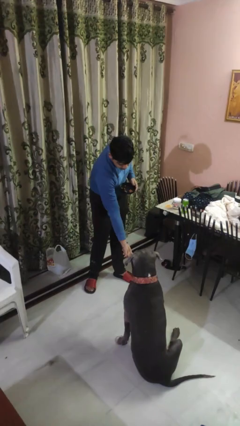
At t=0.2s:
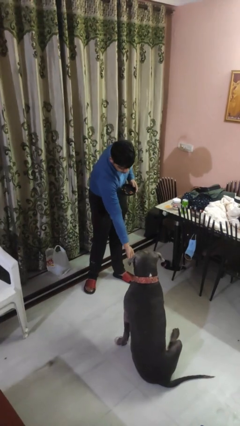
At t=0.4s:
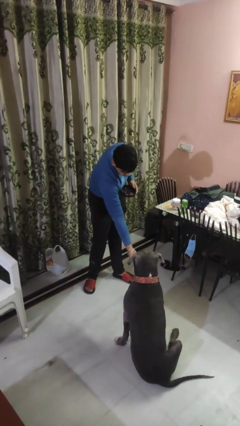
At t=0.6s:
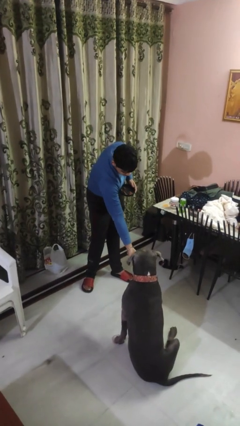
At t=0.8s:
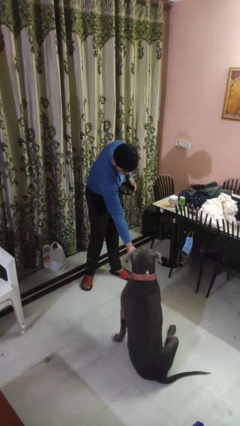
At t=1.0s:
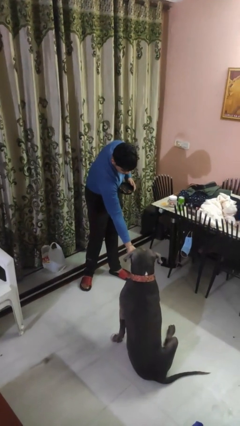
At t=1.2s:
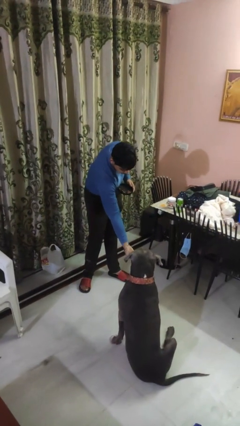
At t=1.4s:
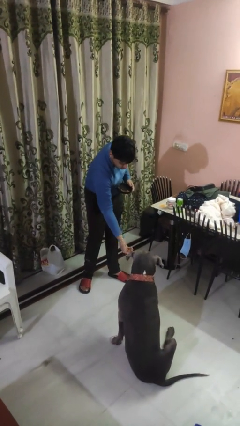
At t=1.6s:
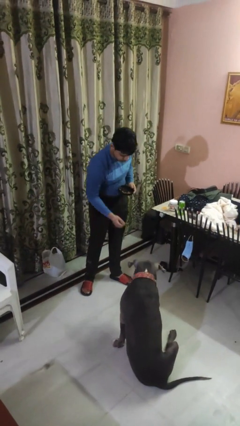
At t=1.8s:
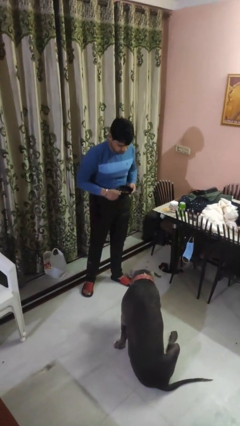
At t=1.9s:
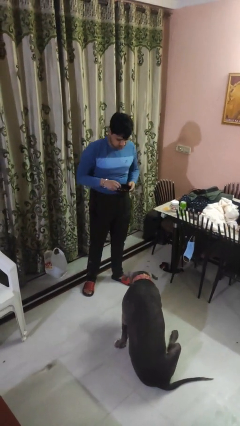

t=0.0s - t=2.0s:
person feeds dog

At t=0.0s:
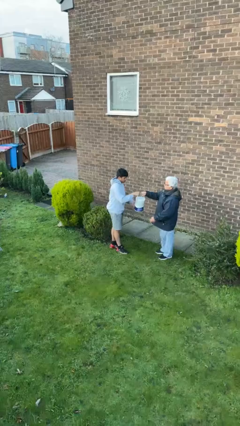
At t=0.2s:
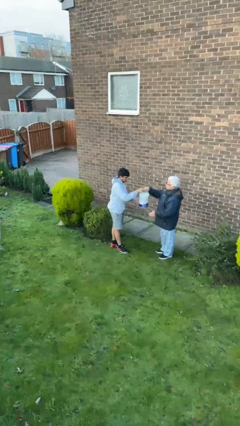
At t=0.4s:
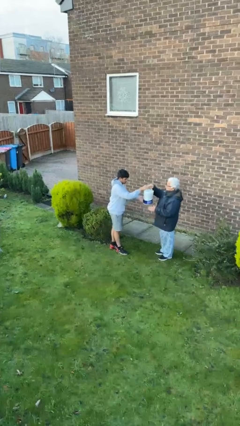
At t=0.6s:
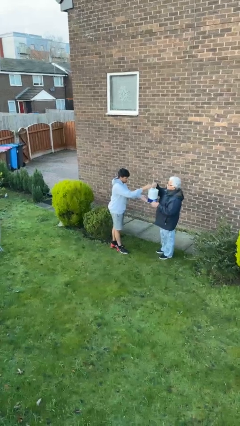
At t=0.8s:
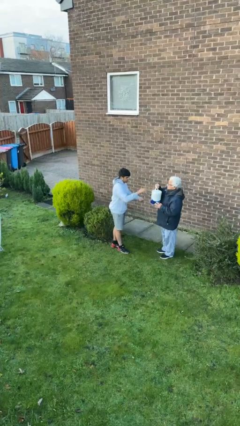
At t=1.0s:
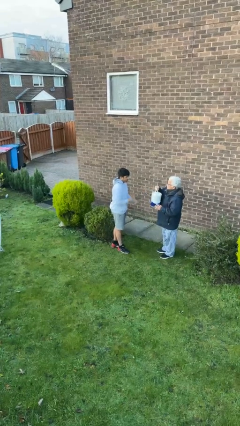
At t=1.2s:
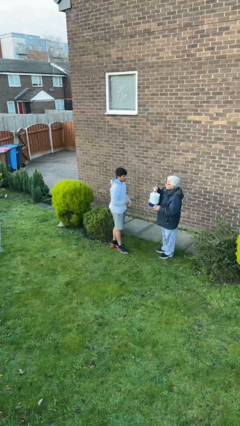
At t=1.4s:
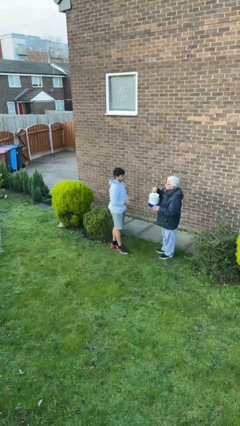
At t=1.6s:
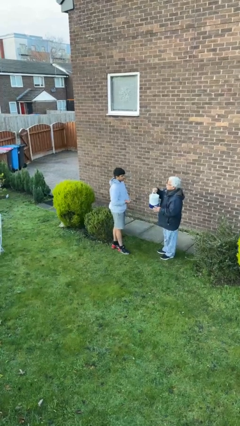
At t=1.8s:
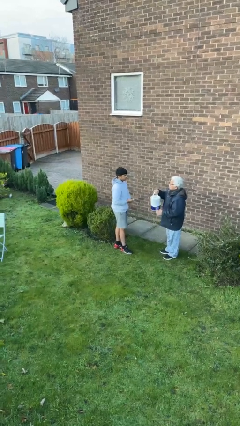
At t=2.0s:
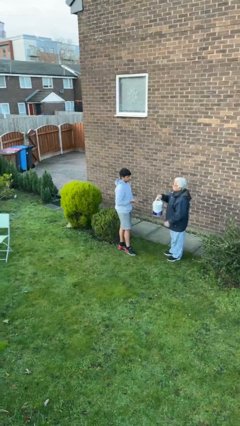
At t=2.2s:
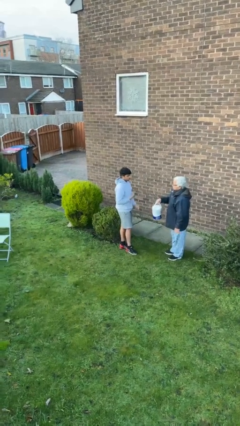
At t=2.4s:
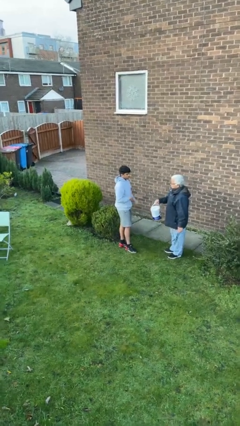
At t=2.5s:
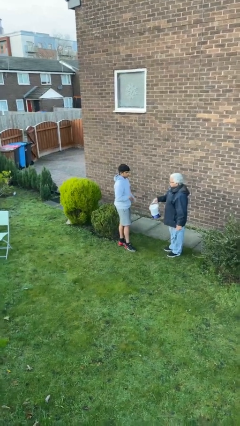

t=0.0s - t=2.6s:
person transfers object to person

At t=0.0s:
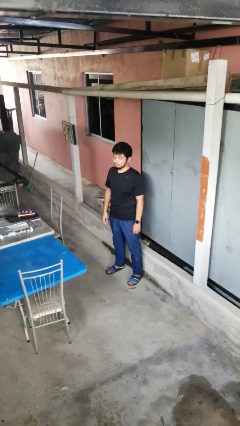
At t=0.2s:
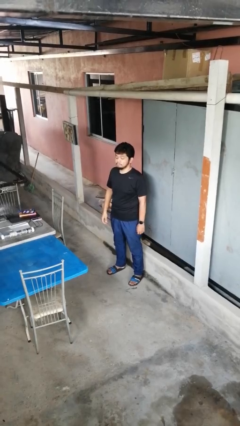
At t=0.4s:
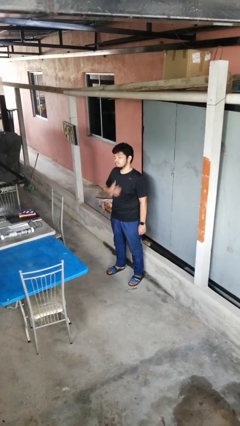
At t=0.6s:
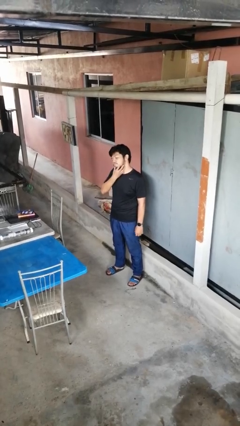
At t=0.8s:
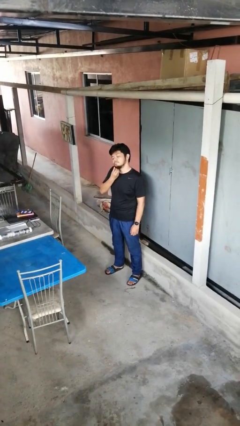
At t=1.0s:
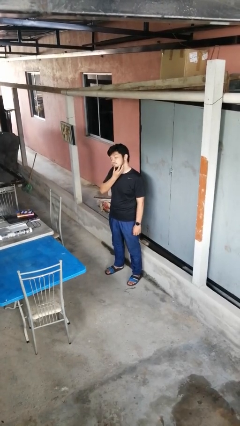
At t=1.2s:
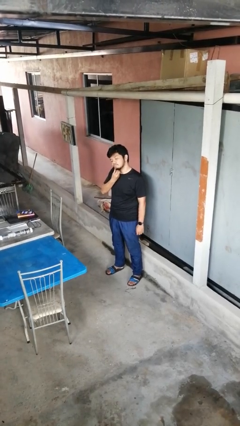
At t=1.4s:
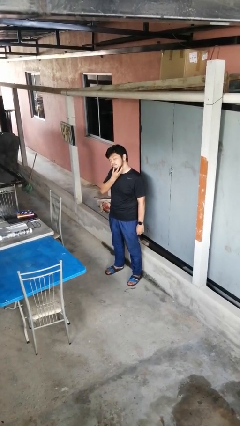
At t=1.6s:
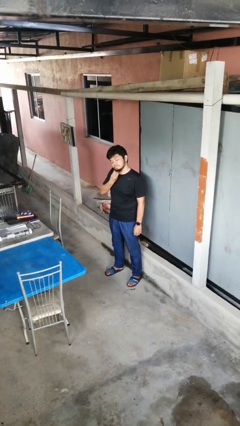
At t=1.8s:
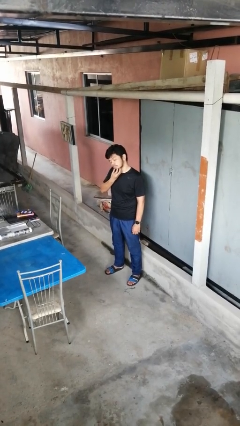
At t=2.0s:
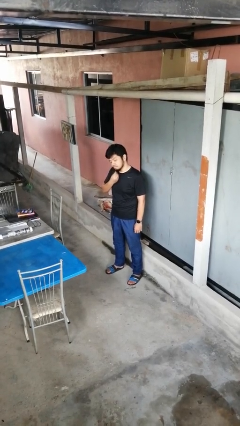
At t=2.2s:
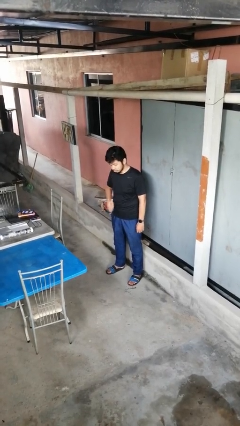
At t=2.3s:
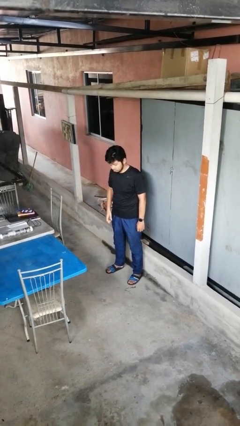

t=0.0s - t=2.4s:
person scratches face

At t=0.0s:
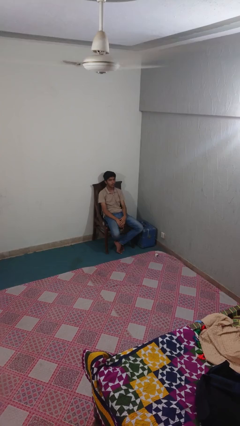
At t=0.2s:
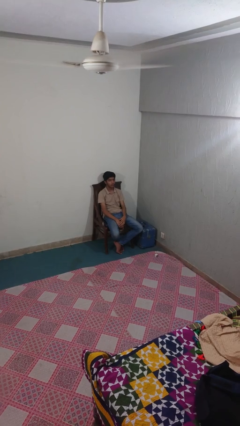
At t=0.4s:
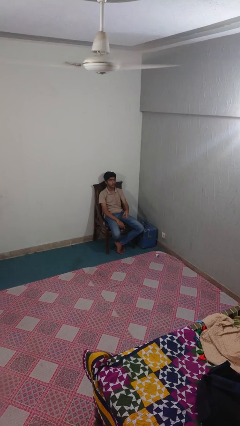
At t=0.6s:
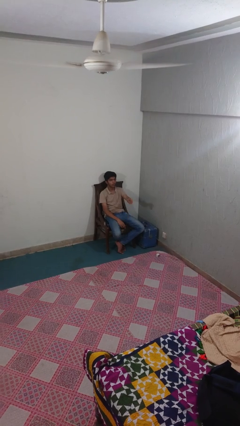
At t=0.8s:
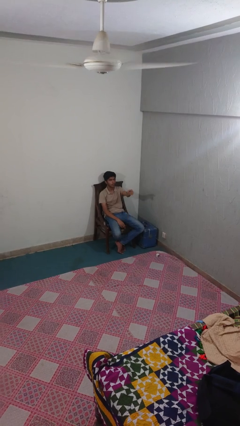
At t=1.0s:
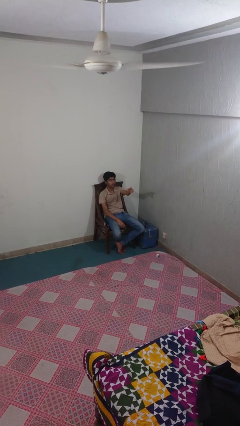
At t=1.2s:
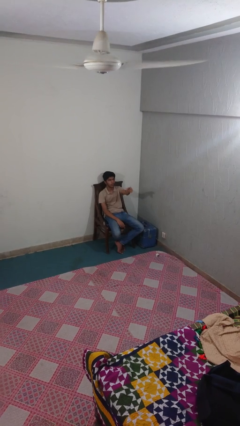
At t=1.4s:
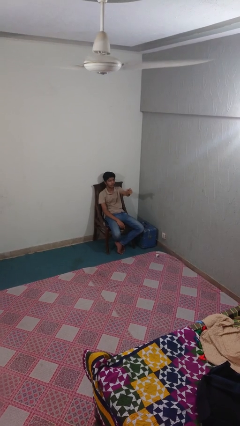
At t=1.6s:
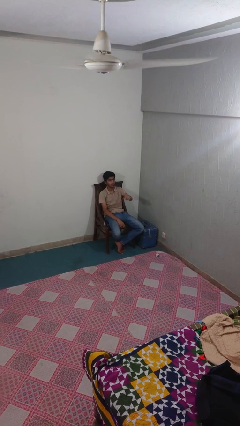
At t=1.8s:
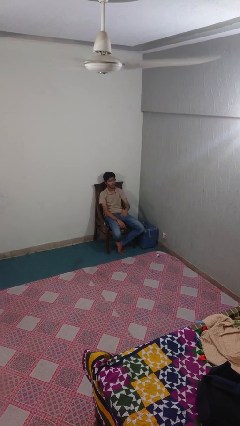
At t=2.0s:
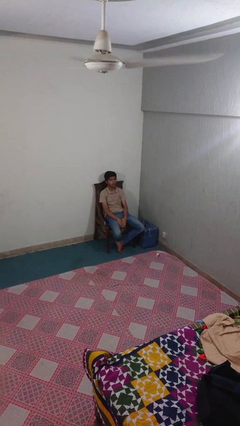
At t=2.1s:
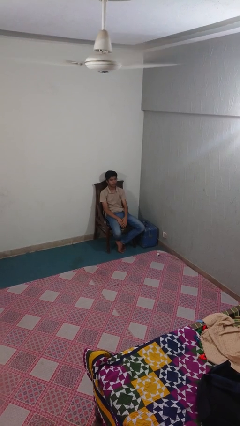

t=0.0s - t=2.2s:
person points at person

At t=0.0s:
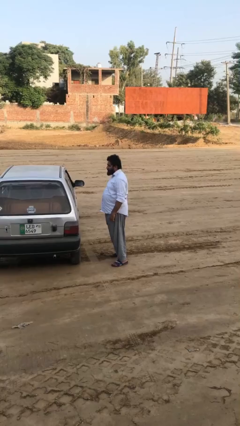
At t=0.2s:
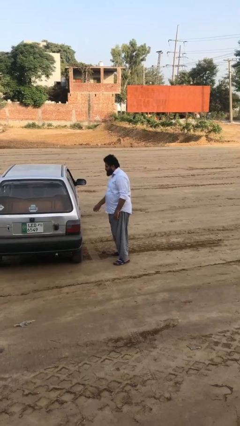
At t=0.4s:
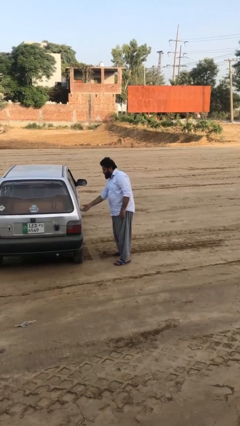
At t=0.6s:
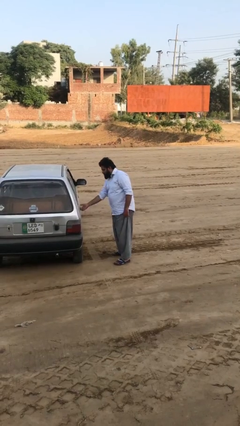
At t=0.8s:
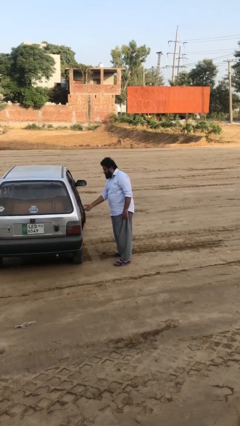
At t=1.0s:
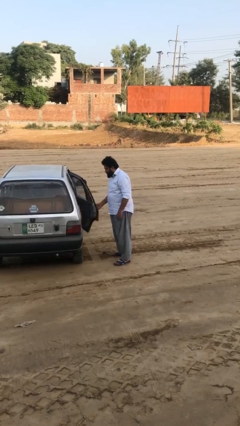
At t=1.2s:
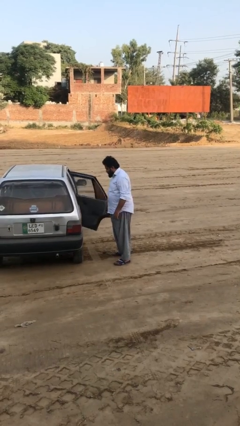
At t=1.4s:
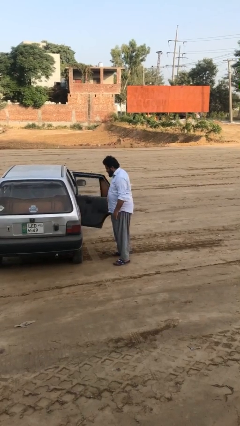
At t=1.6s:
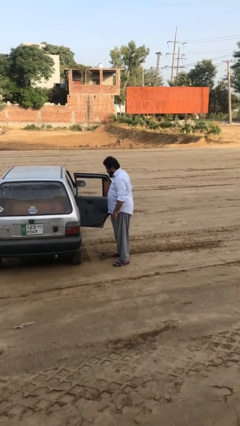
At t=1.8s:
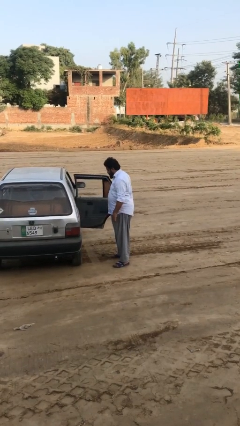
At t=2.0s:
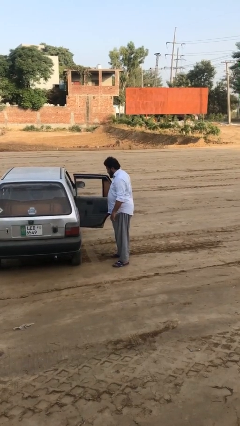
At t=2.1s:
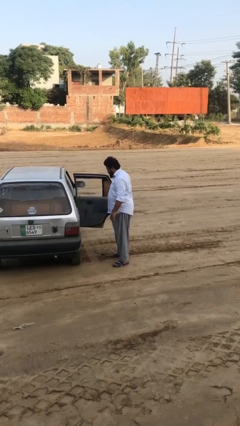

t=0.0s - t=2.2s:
person opens car door

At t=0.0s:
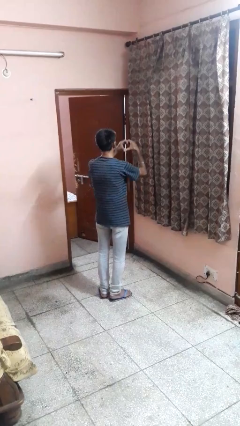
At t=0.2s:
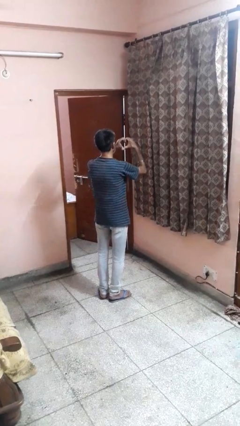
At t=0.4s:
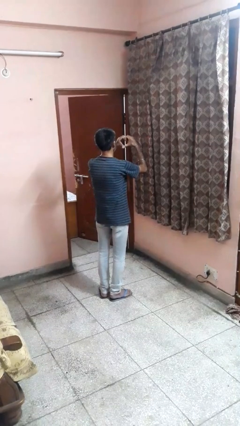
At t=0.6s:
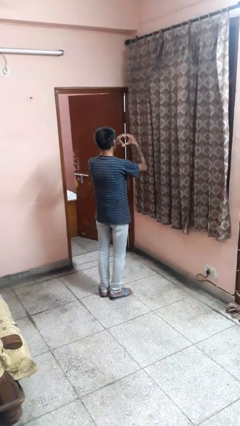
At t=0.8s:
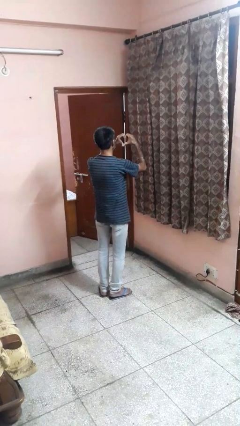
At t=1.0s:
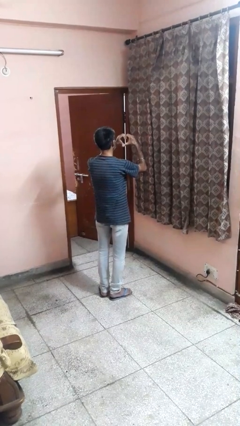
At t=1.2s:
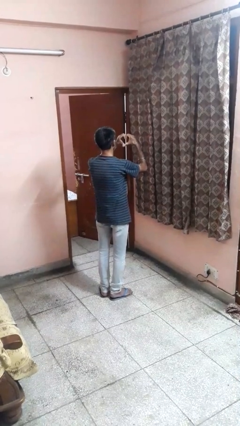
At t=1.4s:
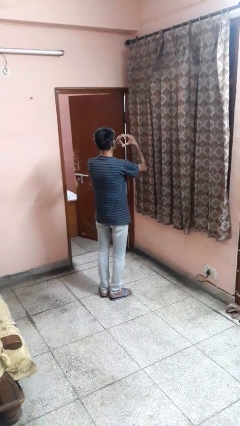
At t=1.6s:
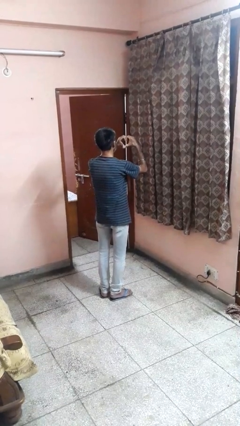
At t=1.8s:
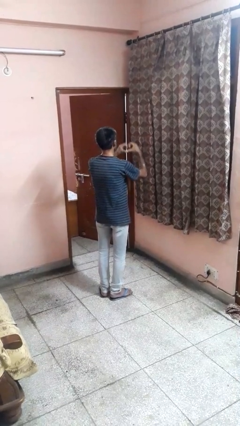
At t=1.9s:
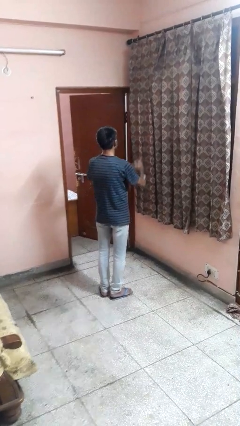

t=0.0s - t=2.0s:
person gestures heart

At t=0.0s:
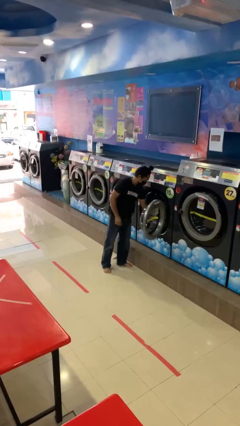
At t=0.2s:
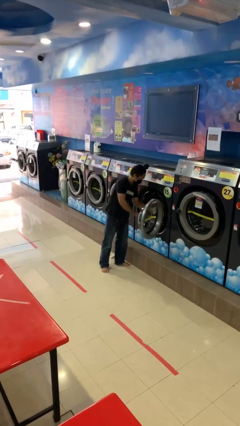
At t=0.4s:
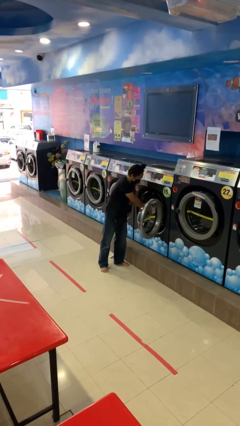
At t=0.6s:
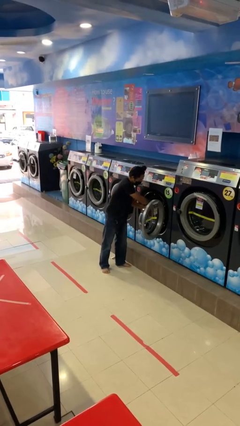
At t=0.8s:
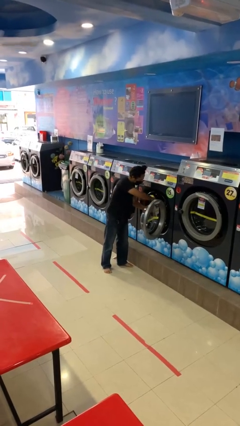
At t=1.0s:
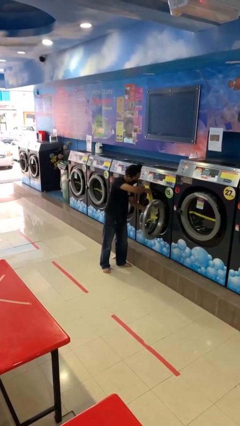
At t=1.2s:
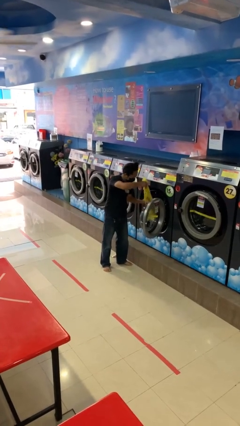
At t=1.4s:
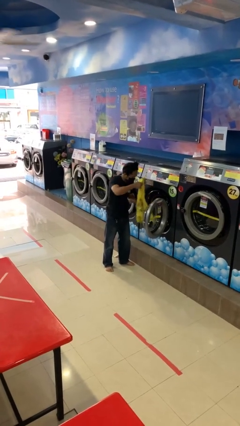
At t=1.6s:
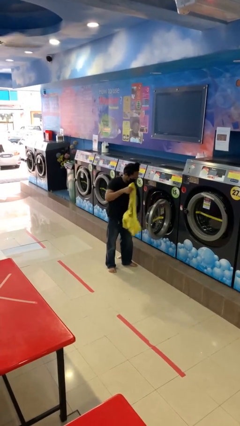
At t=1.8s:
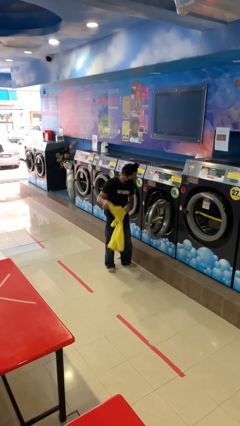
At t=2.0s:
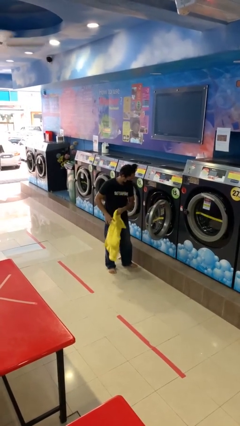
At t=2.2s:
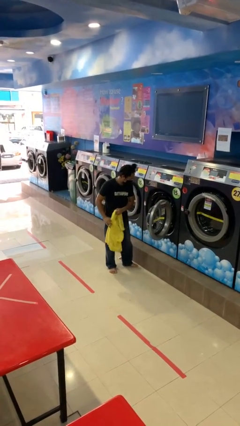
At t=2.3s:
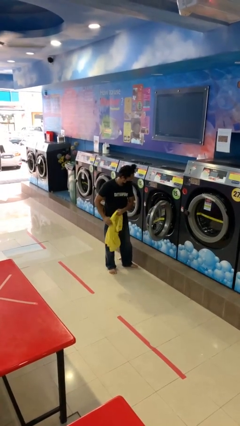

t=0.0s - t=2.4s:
person unloads clotheswasher

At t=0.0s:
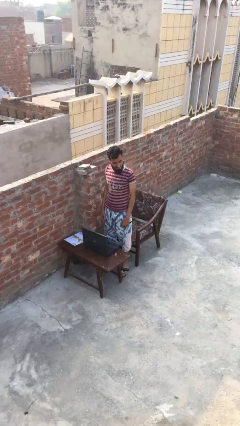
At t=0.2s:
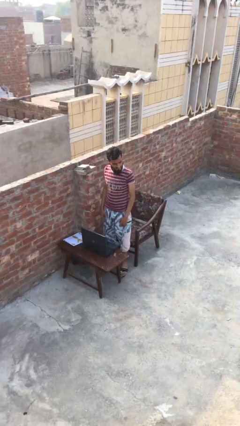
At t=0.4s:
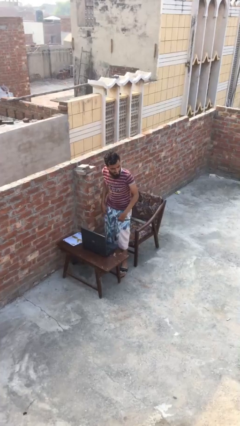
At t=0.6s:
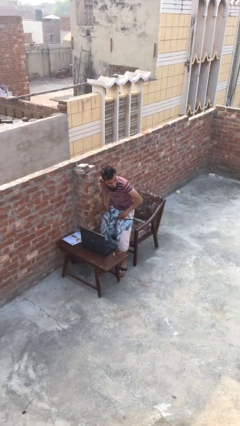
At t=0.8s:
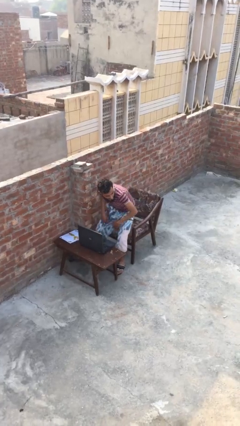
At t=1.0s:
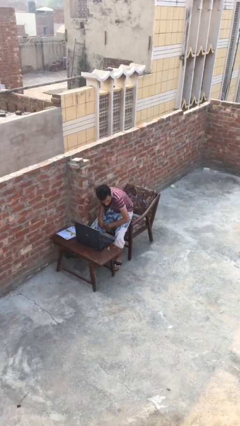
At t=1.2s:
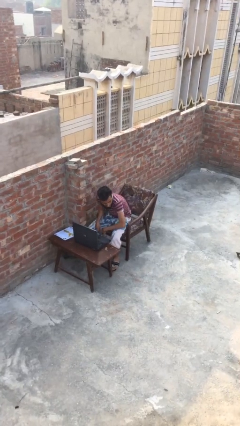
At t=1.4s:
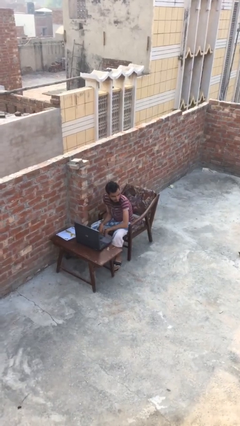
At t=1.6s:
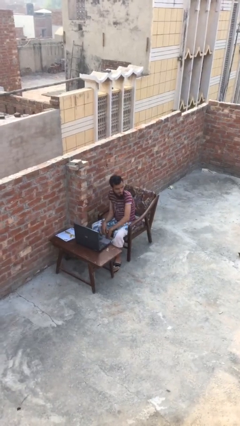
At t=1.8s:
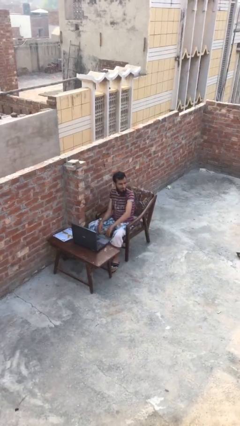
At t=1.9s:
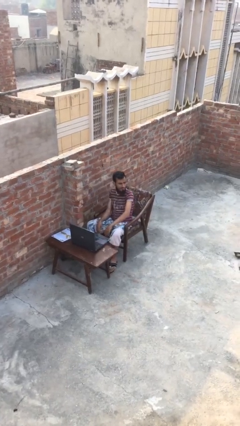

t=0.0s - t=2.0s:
person sits down
